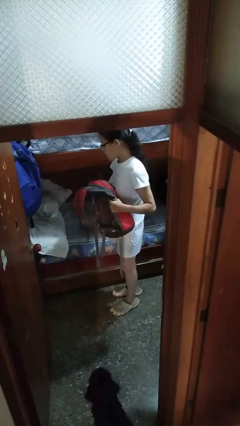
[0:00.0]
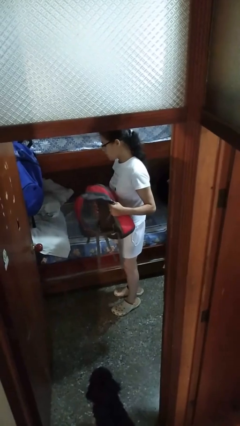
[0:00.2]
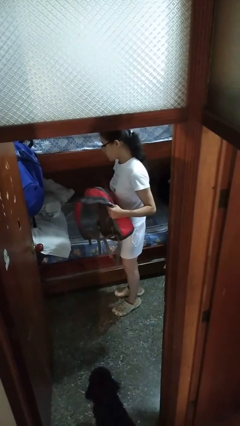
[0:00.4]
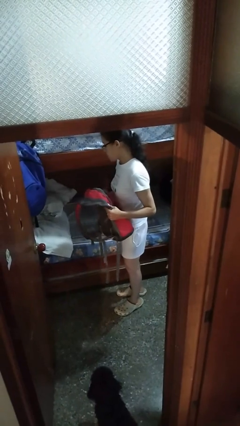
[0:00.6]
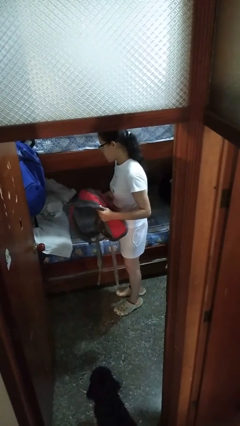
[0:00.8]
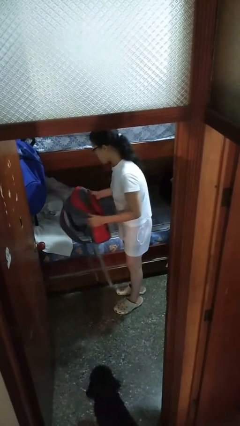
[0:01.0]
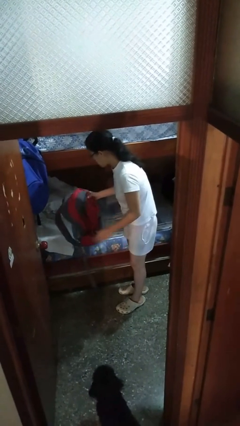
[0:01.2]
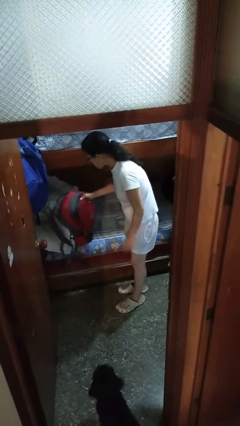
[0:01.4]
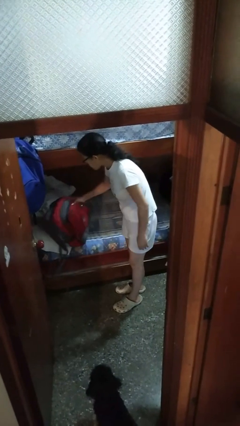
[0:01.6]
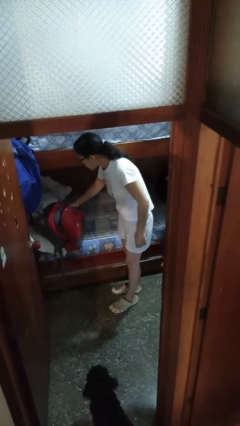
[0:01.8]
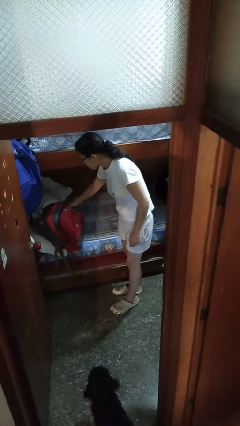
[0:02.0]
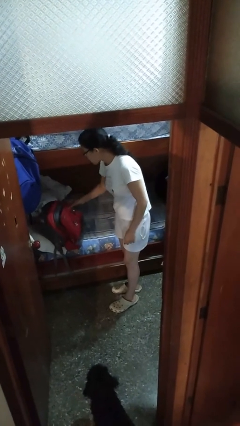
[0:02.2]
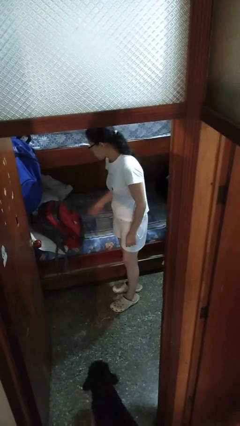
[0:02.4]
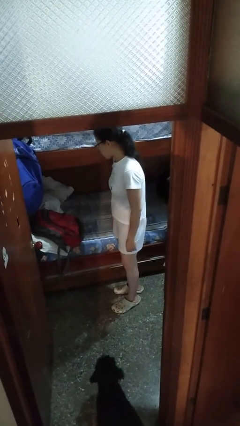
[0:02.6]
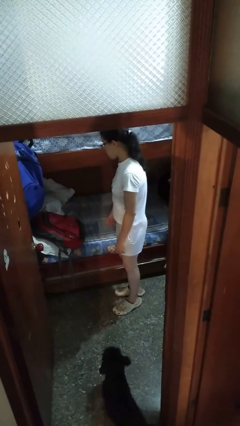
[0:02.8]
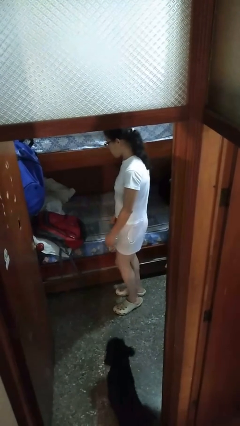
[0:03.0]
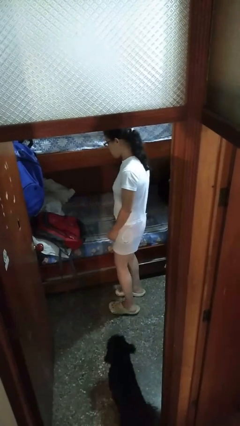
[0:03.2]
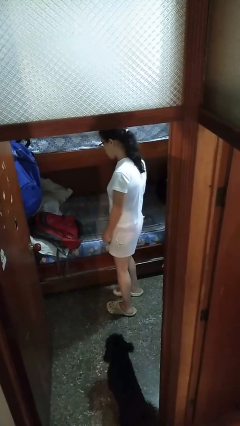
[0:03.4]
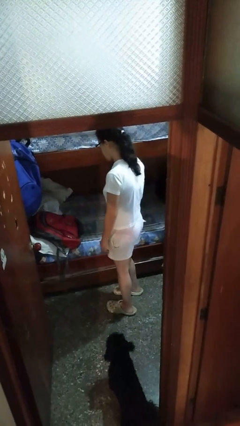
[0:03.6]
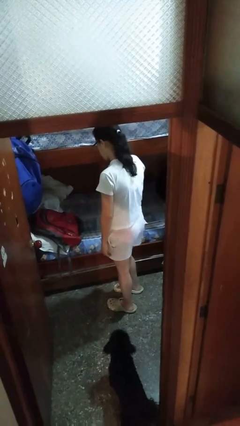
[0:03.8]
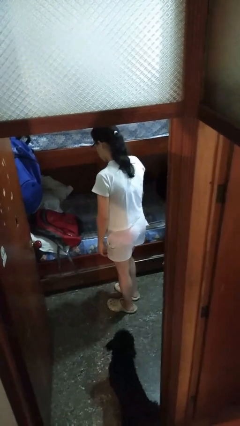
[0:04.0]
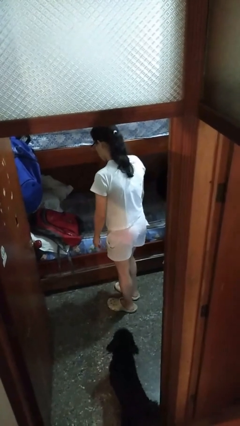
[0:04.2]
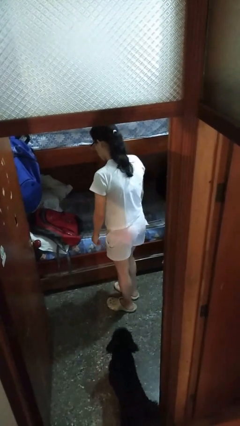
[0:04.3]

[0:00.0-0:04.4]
person puts down object on bed

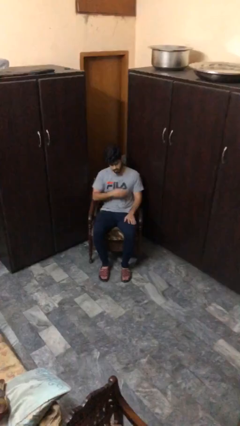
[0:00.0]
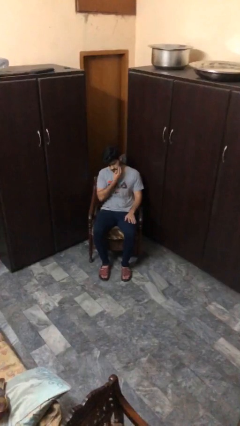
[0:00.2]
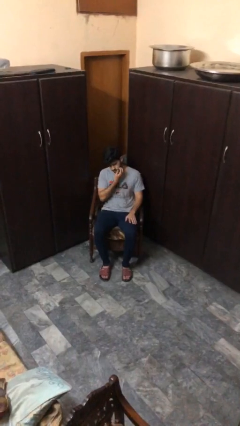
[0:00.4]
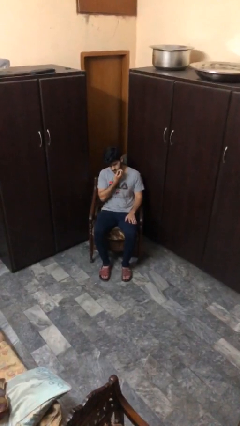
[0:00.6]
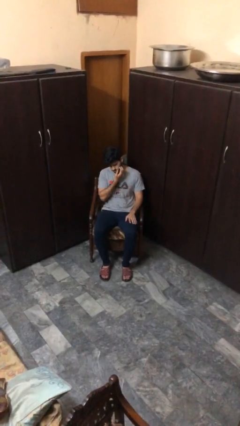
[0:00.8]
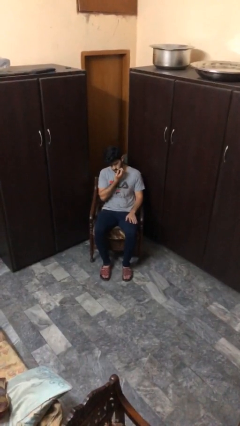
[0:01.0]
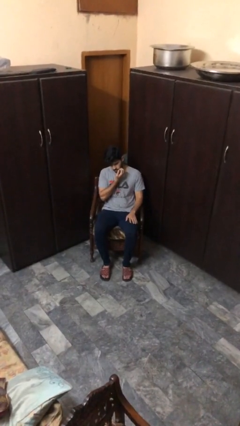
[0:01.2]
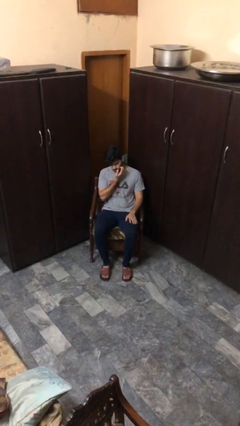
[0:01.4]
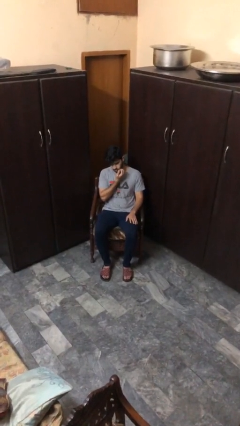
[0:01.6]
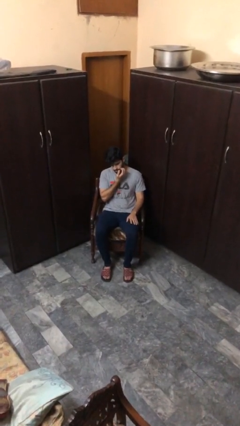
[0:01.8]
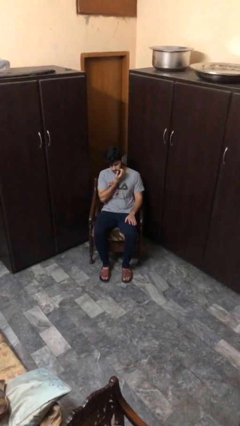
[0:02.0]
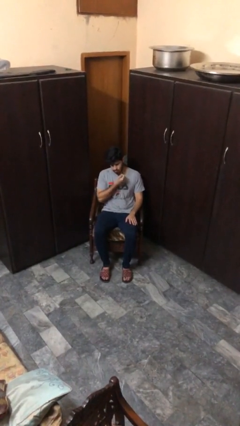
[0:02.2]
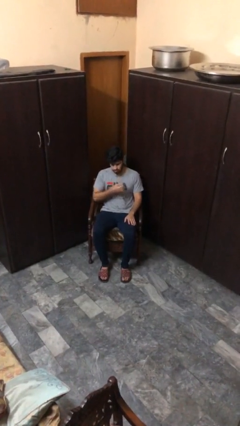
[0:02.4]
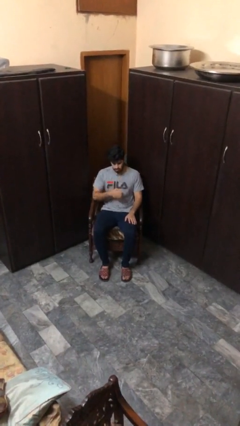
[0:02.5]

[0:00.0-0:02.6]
person scratches face

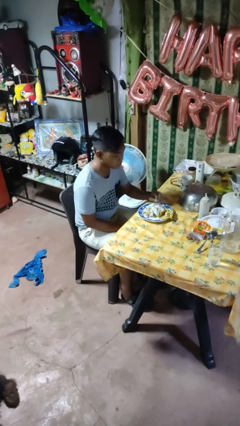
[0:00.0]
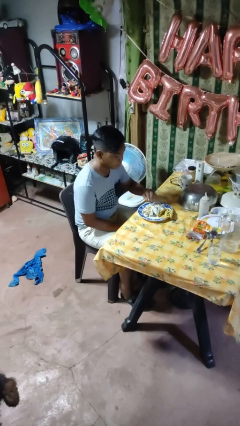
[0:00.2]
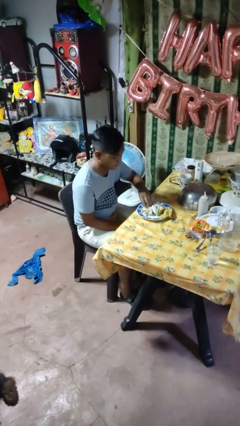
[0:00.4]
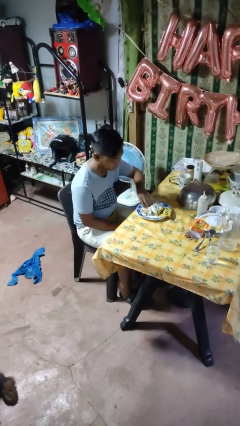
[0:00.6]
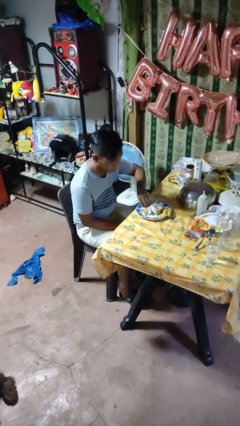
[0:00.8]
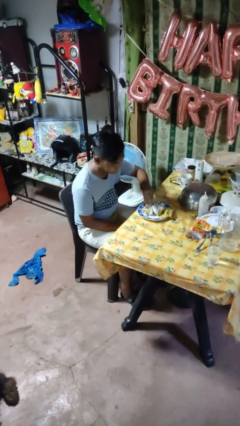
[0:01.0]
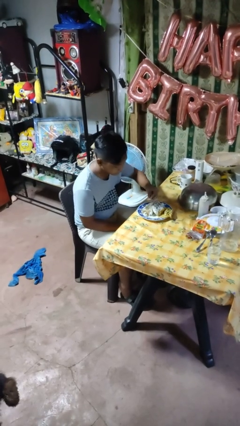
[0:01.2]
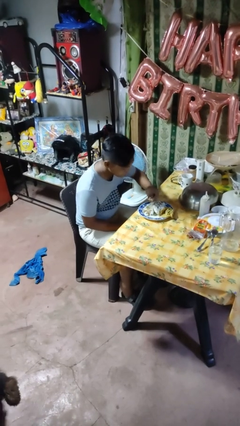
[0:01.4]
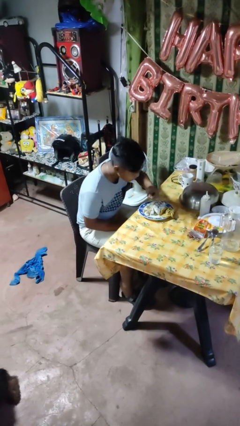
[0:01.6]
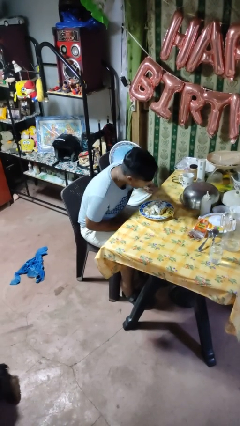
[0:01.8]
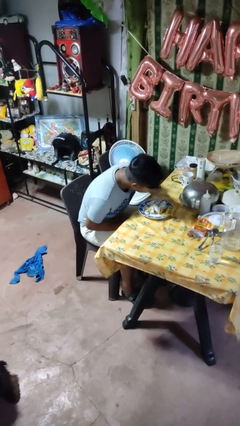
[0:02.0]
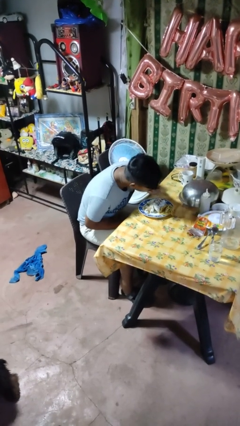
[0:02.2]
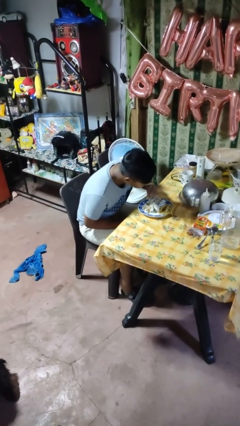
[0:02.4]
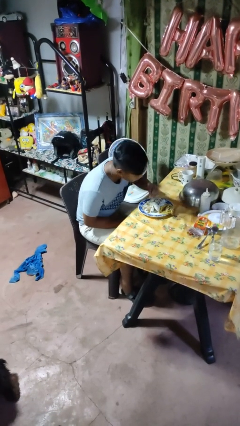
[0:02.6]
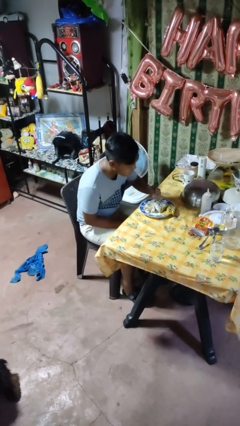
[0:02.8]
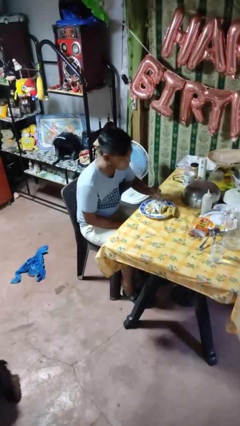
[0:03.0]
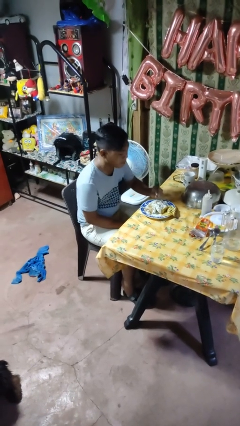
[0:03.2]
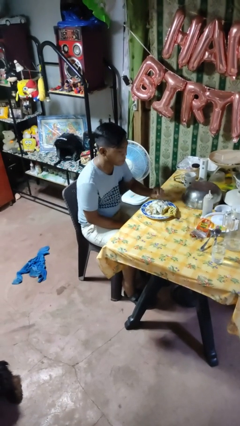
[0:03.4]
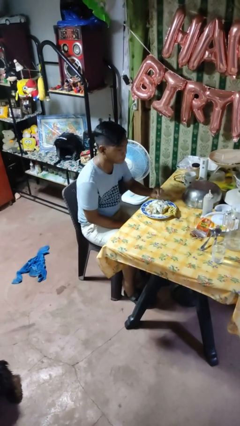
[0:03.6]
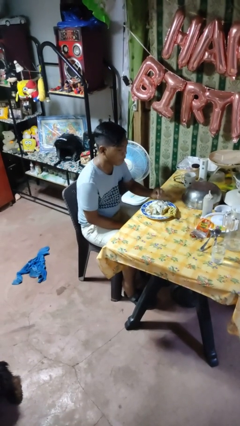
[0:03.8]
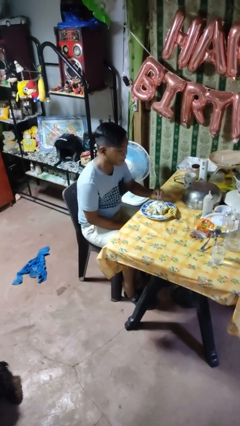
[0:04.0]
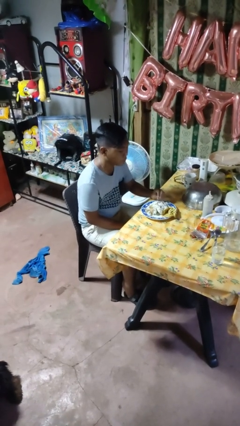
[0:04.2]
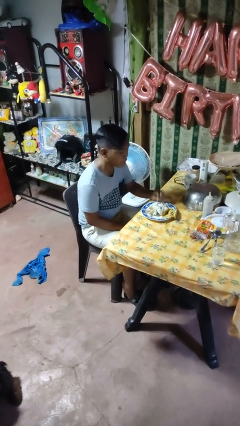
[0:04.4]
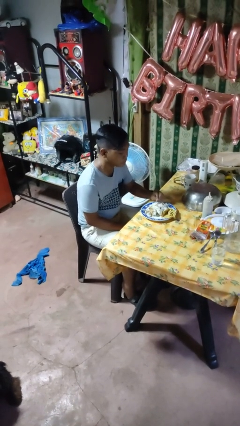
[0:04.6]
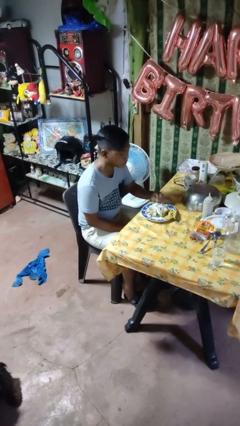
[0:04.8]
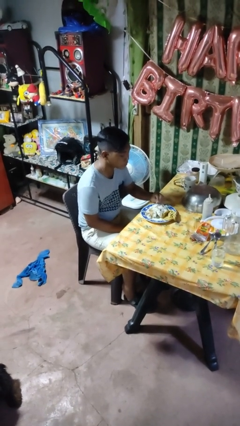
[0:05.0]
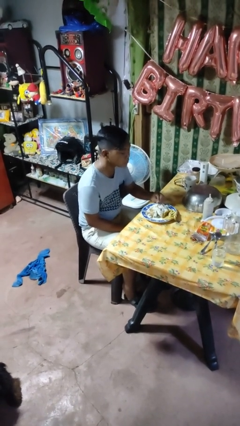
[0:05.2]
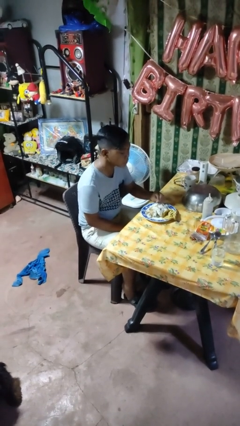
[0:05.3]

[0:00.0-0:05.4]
person eats with hands

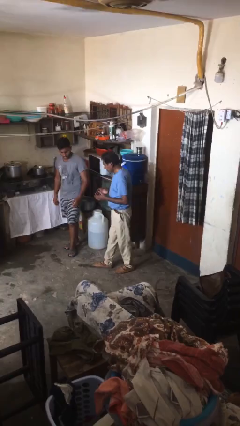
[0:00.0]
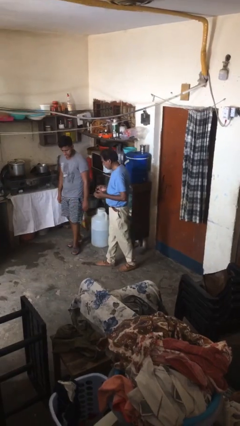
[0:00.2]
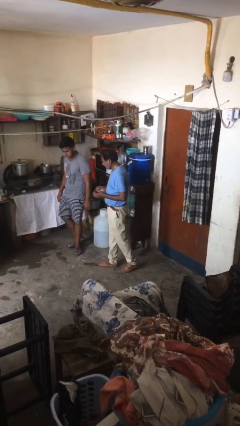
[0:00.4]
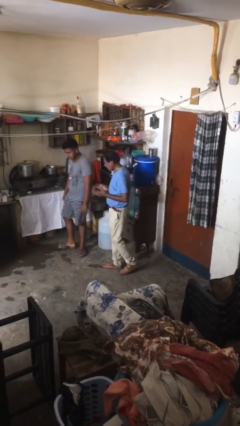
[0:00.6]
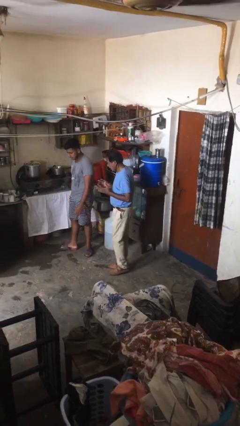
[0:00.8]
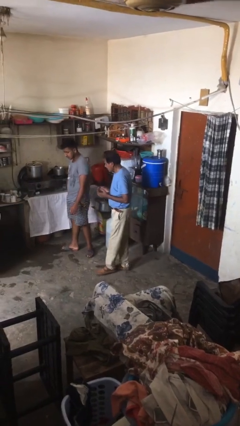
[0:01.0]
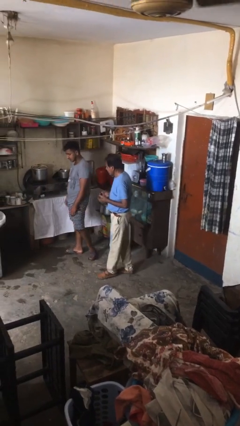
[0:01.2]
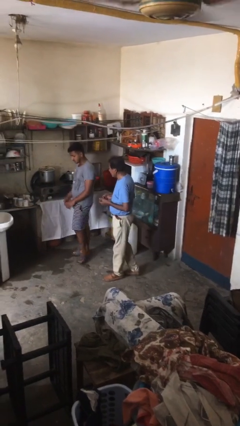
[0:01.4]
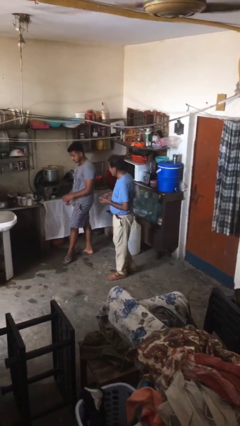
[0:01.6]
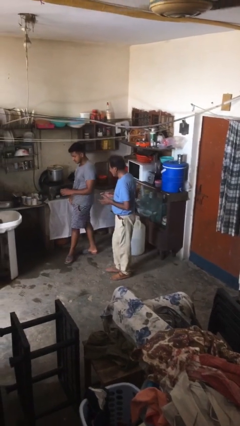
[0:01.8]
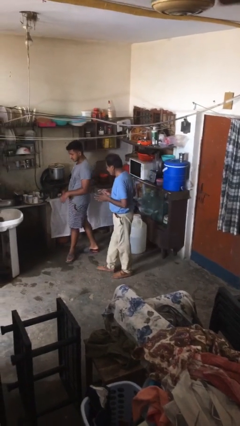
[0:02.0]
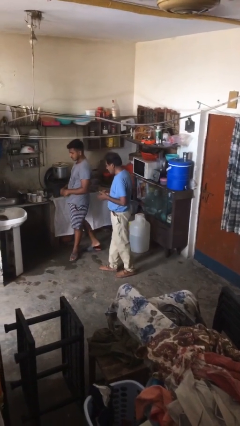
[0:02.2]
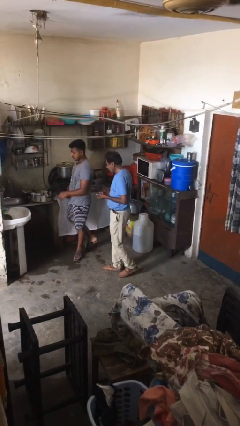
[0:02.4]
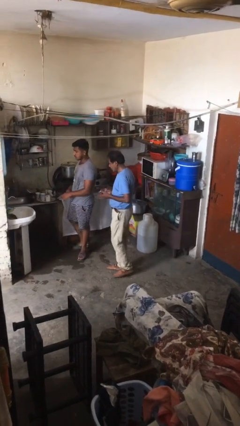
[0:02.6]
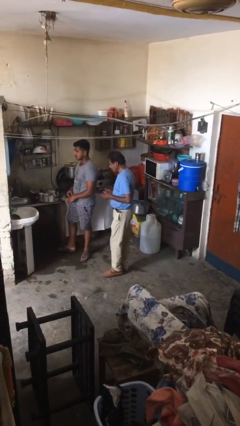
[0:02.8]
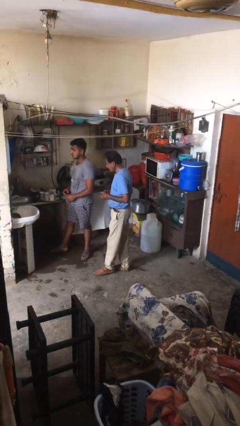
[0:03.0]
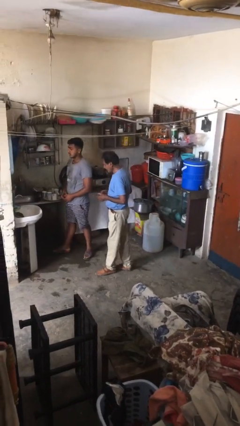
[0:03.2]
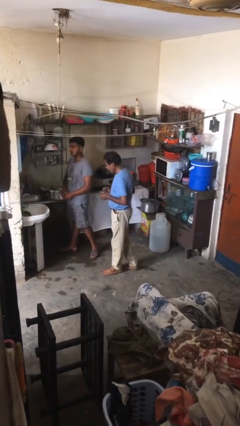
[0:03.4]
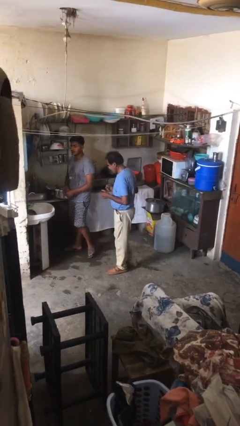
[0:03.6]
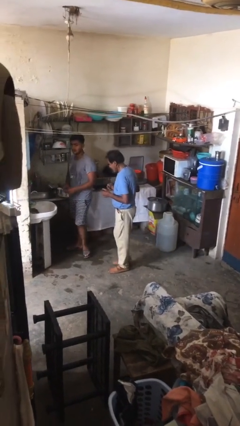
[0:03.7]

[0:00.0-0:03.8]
person talks to person

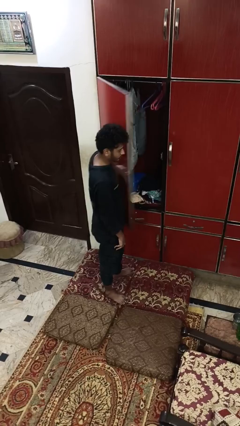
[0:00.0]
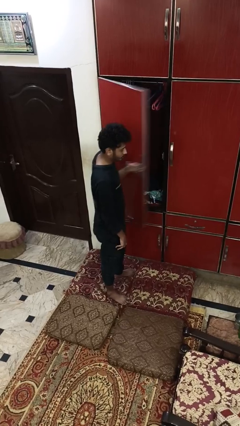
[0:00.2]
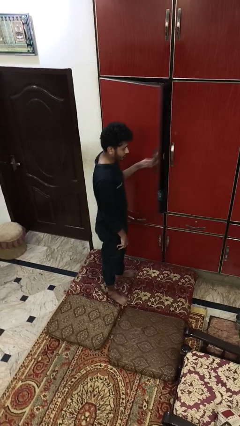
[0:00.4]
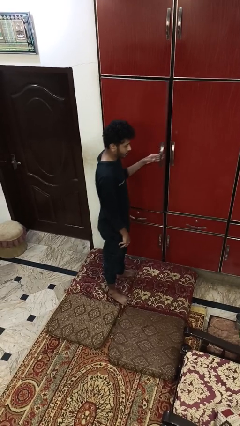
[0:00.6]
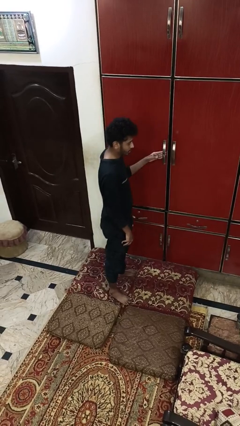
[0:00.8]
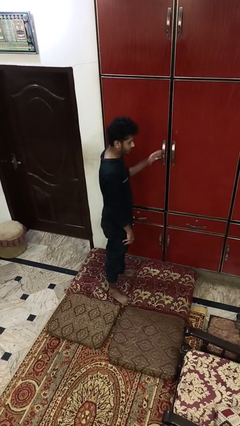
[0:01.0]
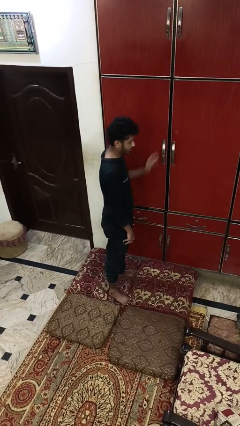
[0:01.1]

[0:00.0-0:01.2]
person closes closet door

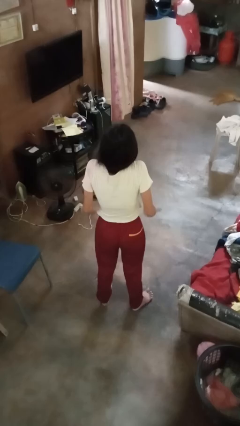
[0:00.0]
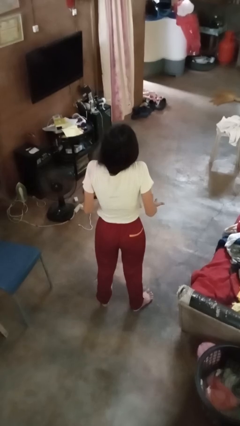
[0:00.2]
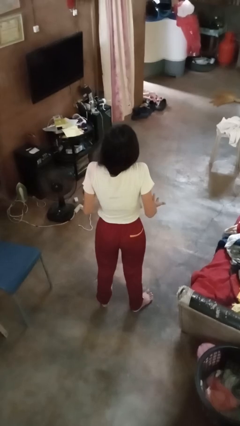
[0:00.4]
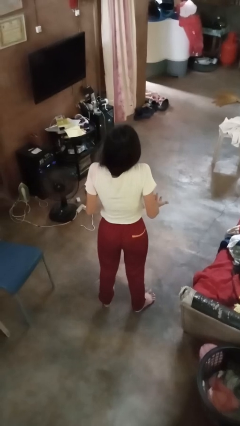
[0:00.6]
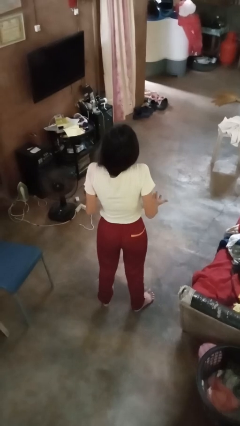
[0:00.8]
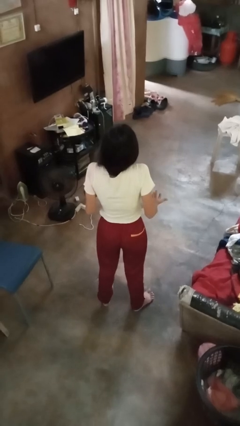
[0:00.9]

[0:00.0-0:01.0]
person shrugs
